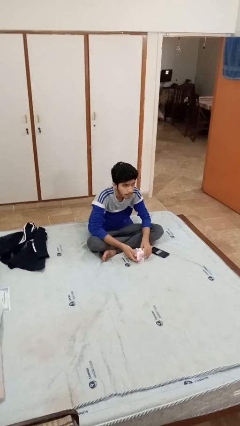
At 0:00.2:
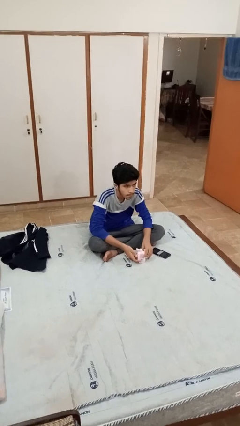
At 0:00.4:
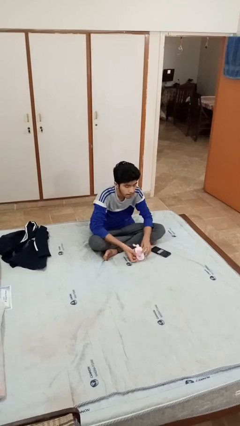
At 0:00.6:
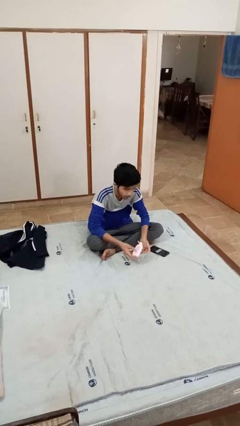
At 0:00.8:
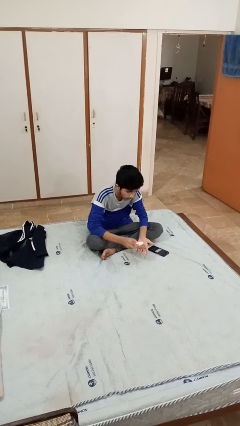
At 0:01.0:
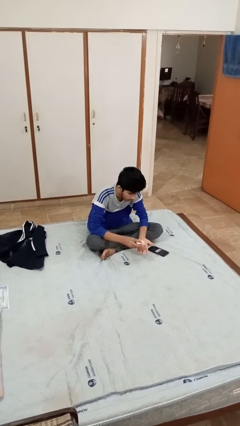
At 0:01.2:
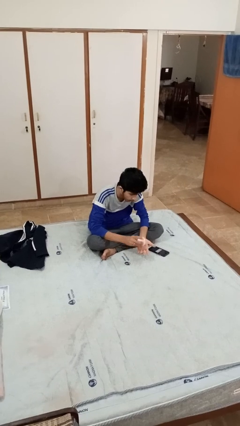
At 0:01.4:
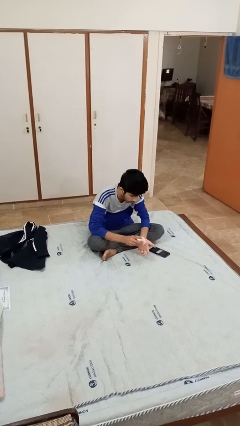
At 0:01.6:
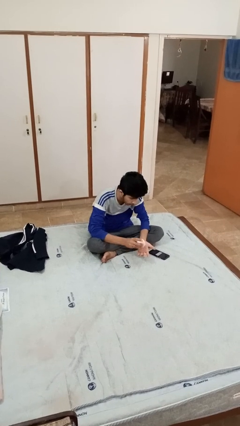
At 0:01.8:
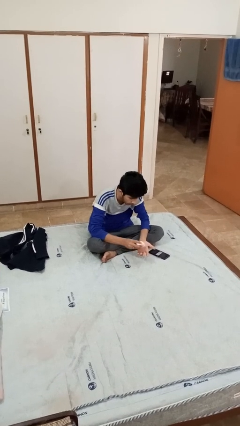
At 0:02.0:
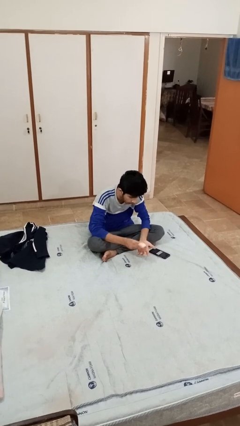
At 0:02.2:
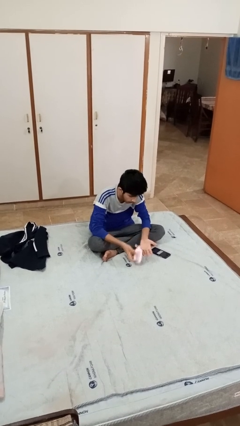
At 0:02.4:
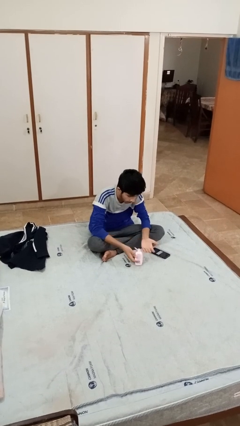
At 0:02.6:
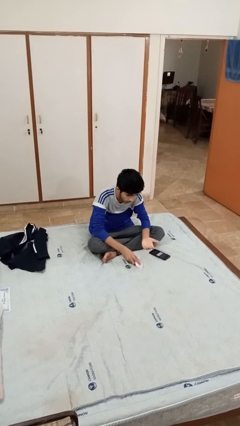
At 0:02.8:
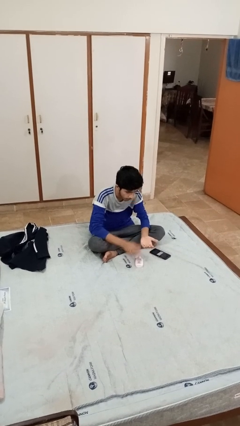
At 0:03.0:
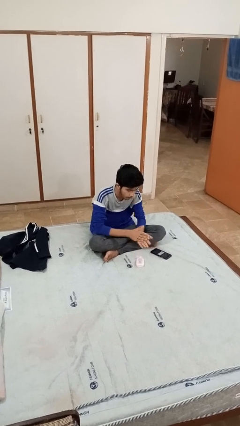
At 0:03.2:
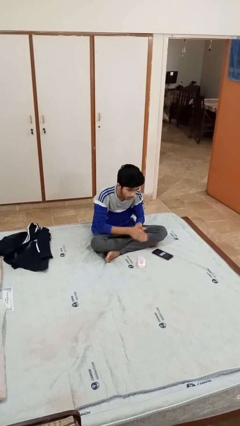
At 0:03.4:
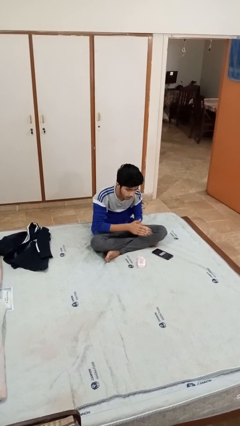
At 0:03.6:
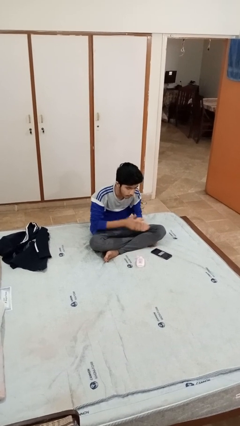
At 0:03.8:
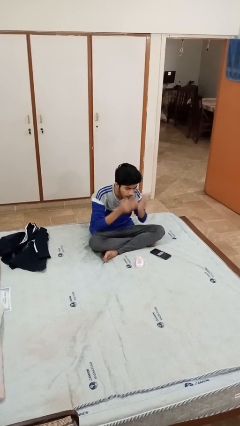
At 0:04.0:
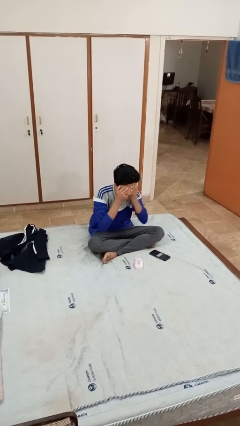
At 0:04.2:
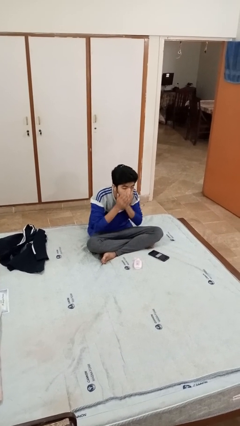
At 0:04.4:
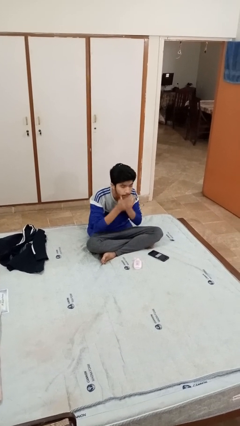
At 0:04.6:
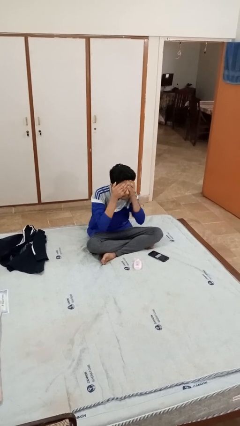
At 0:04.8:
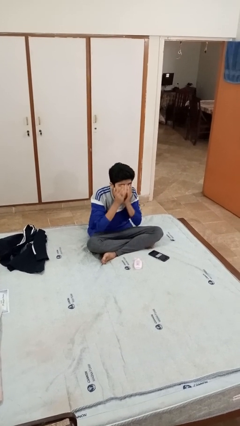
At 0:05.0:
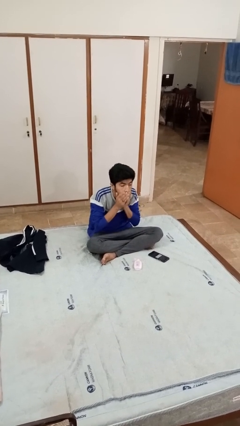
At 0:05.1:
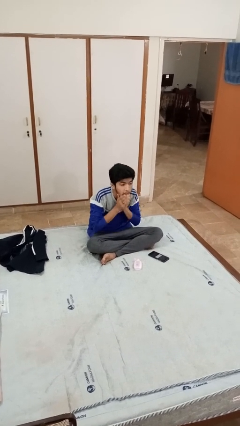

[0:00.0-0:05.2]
person applies facial moisturizer

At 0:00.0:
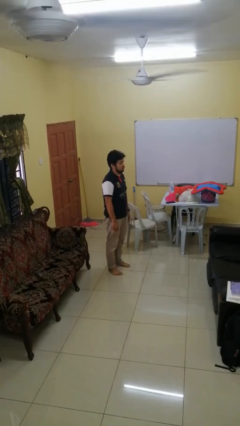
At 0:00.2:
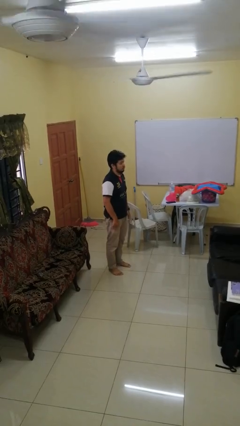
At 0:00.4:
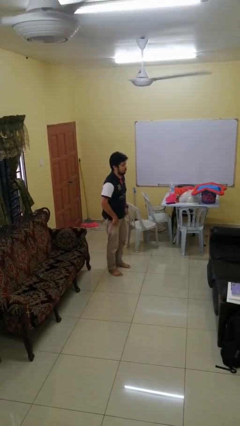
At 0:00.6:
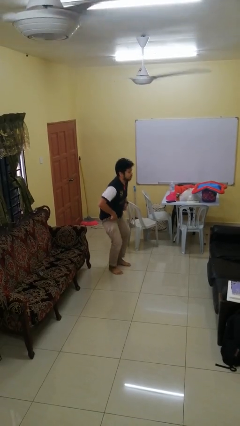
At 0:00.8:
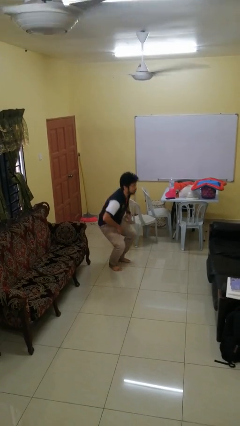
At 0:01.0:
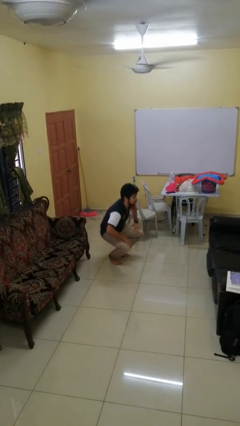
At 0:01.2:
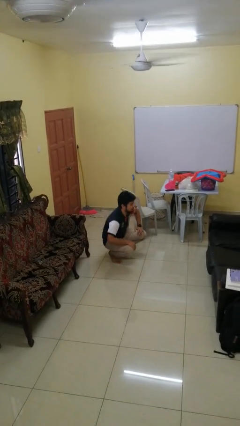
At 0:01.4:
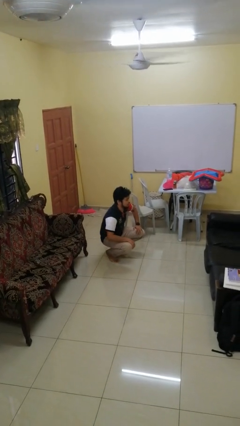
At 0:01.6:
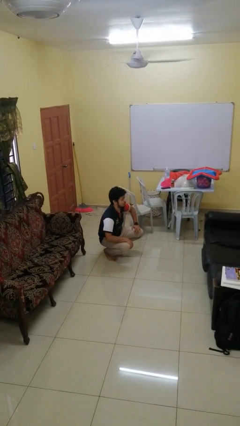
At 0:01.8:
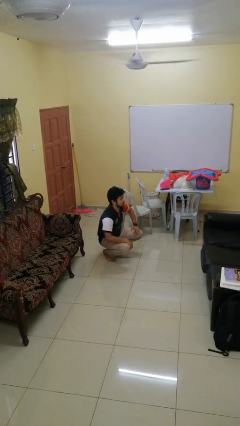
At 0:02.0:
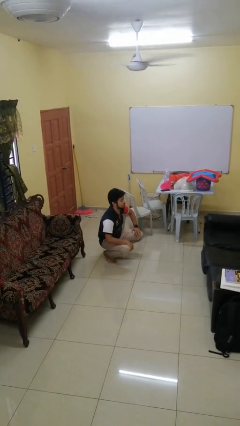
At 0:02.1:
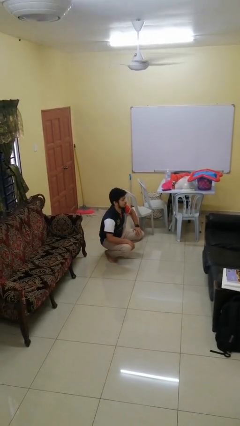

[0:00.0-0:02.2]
person squats

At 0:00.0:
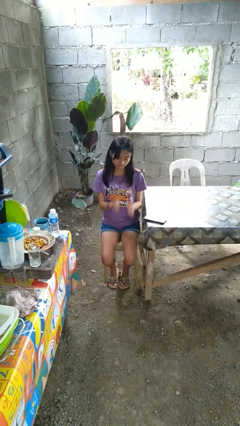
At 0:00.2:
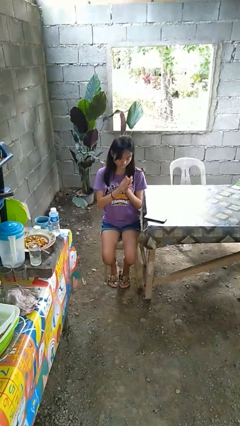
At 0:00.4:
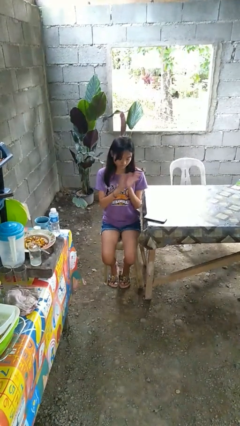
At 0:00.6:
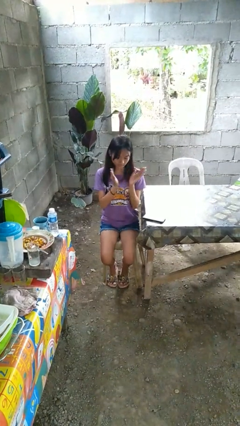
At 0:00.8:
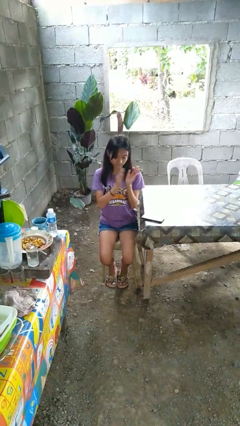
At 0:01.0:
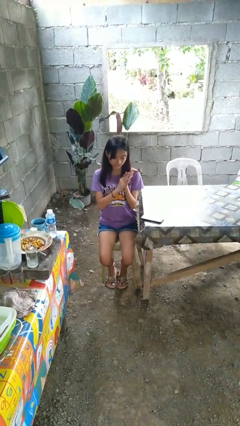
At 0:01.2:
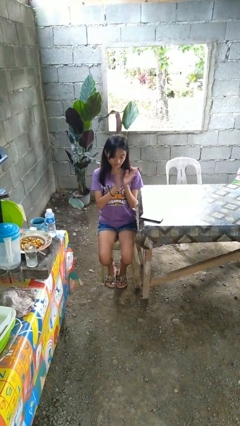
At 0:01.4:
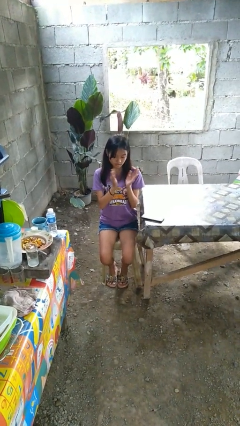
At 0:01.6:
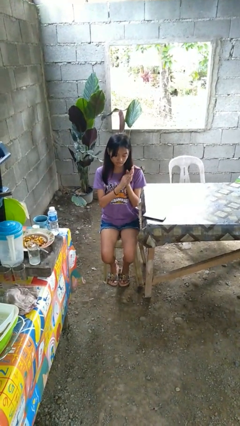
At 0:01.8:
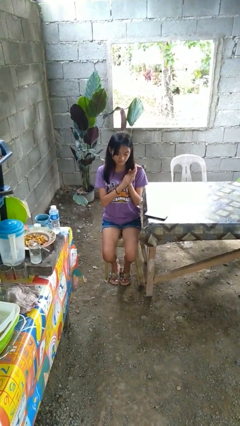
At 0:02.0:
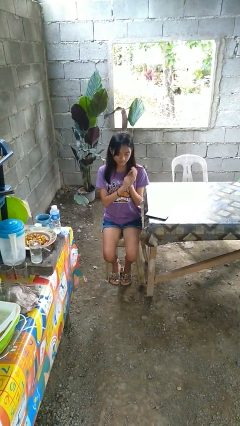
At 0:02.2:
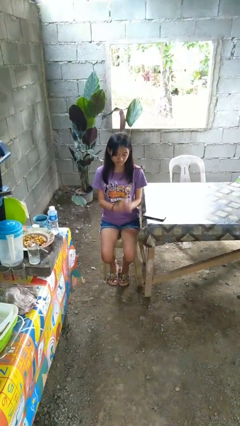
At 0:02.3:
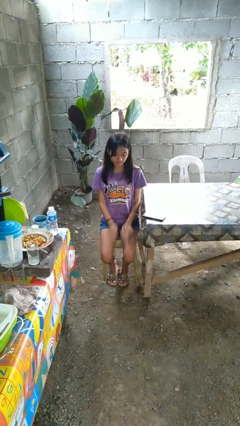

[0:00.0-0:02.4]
person claps hands

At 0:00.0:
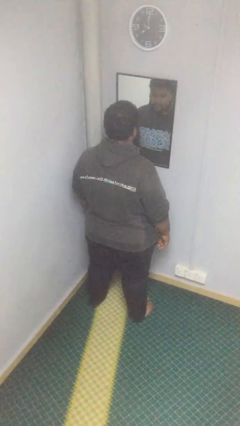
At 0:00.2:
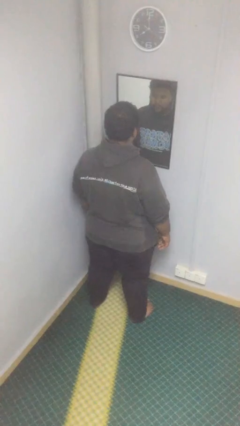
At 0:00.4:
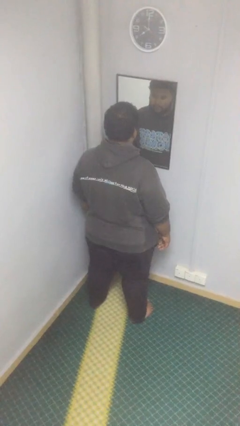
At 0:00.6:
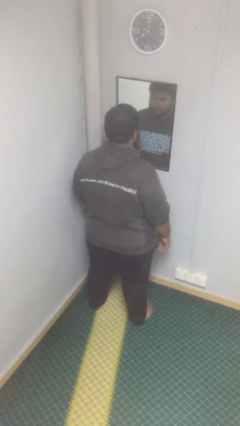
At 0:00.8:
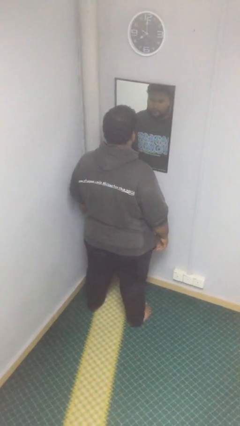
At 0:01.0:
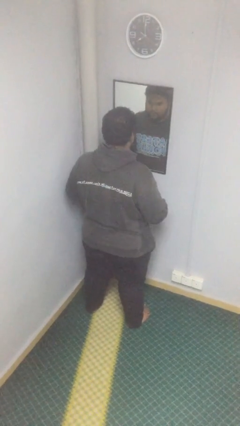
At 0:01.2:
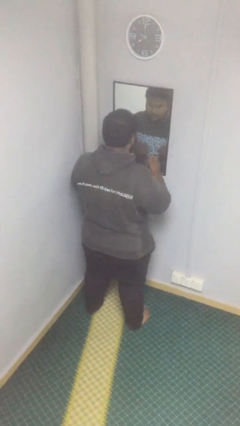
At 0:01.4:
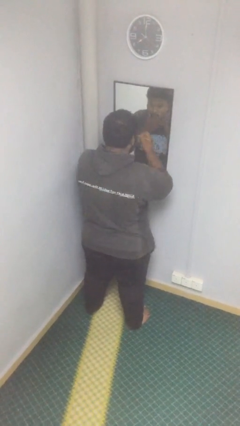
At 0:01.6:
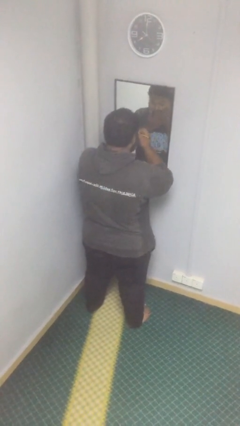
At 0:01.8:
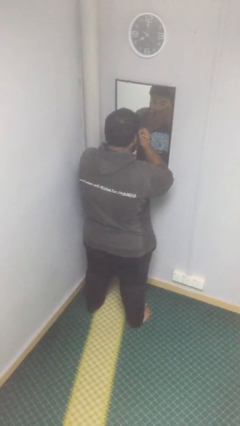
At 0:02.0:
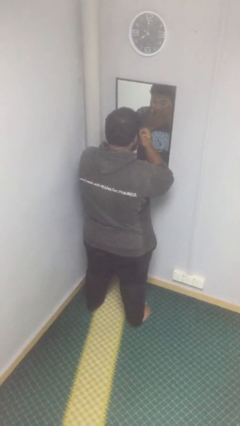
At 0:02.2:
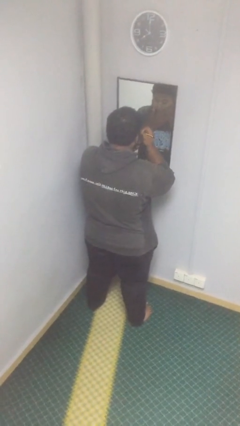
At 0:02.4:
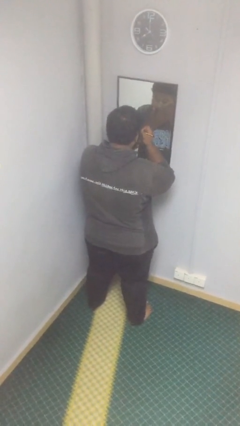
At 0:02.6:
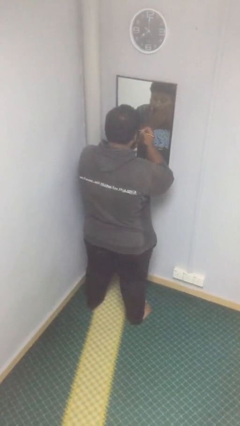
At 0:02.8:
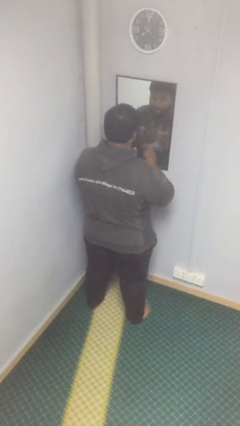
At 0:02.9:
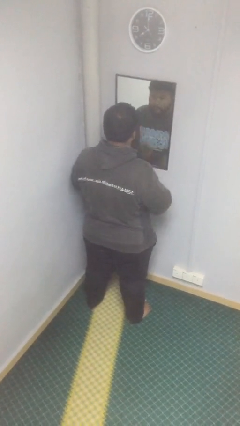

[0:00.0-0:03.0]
person applies eye makeup

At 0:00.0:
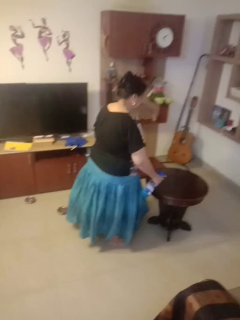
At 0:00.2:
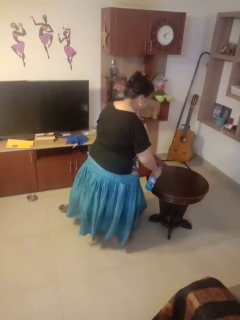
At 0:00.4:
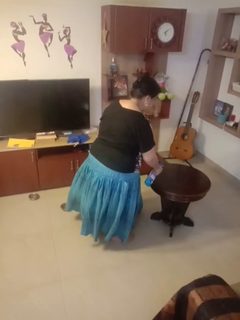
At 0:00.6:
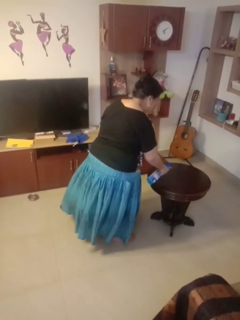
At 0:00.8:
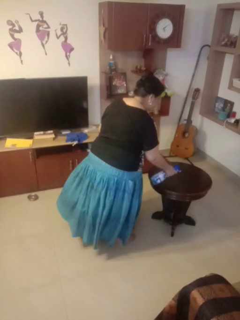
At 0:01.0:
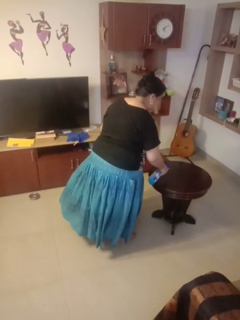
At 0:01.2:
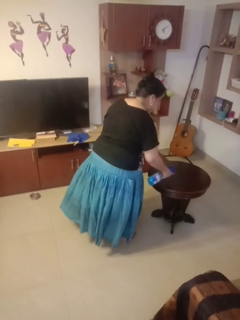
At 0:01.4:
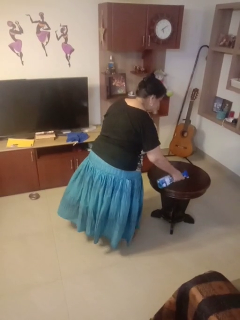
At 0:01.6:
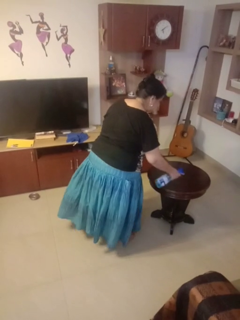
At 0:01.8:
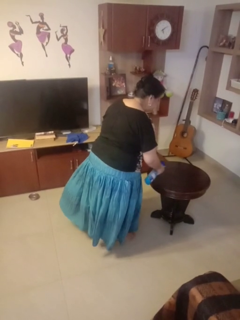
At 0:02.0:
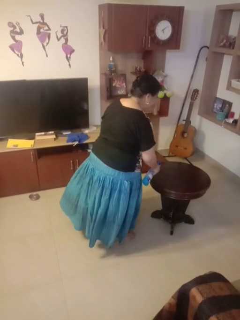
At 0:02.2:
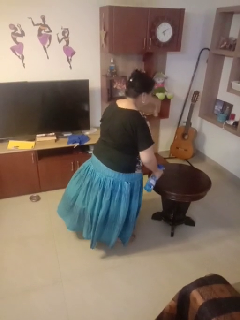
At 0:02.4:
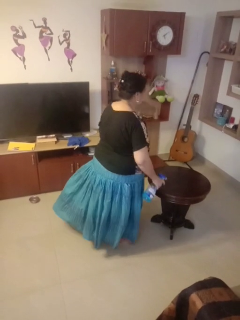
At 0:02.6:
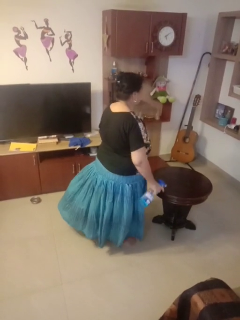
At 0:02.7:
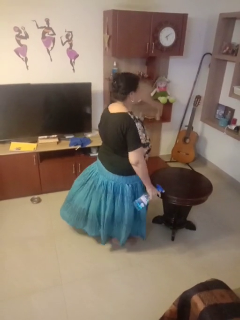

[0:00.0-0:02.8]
person sprays from bottle

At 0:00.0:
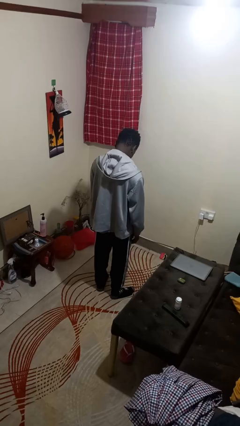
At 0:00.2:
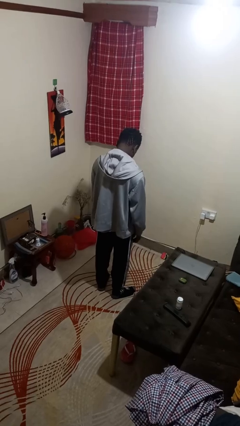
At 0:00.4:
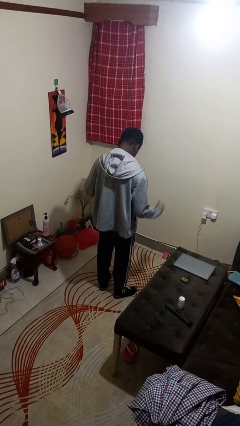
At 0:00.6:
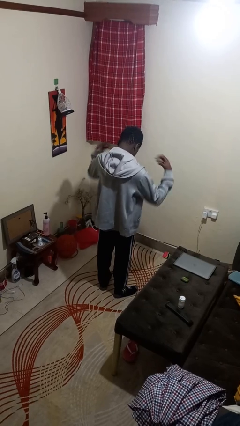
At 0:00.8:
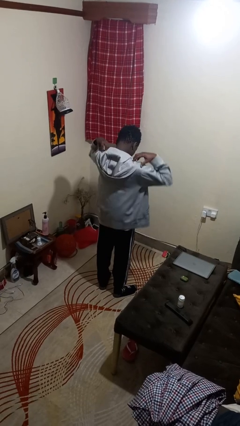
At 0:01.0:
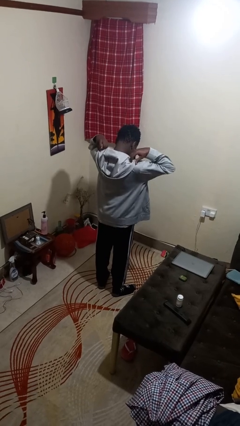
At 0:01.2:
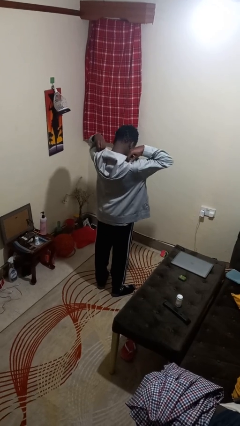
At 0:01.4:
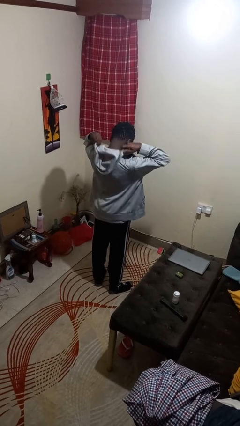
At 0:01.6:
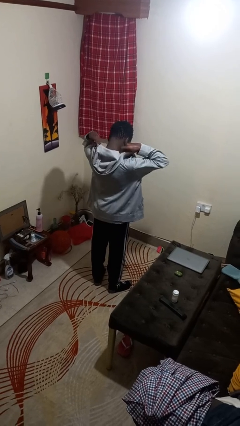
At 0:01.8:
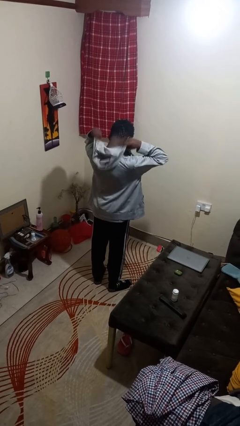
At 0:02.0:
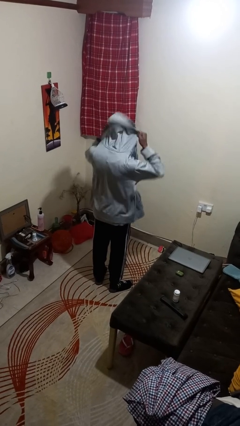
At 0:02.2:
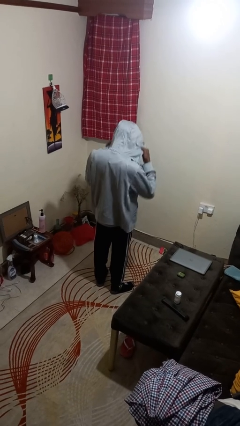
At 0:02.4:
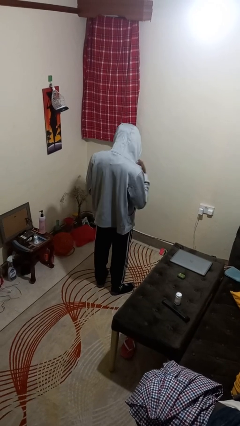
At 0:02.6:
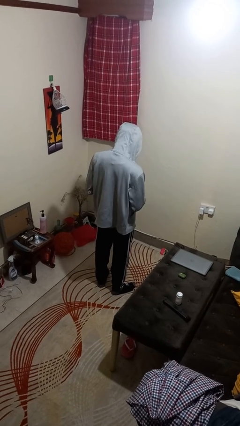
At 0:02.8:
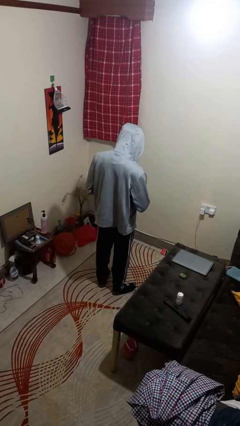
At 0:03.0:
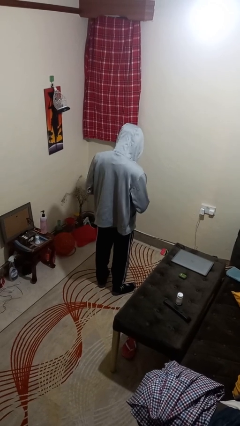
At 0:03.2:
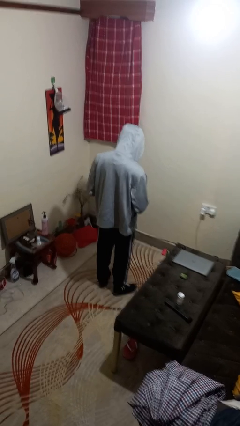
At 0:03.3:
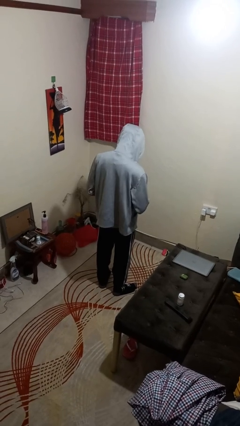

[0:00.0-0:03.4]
person puts on hoodie
